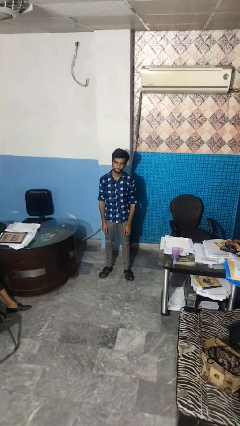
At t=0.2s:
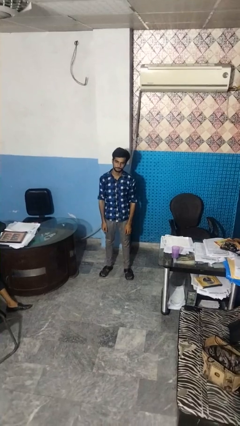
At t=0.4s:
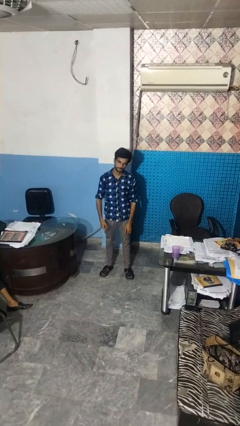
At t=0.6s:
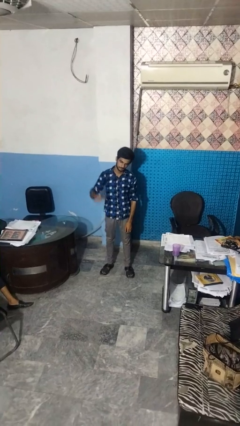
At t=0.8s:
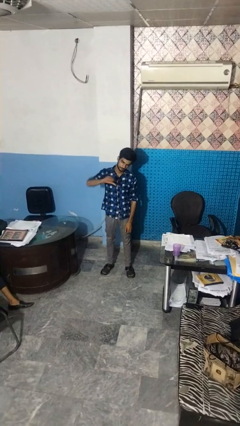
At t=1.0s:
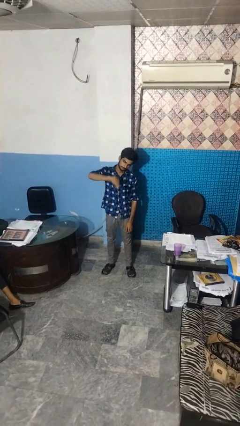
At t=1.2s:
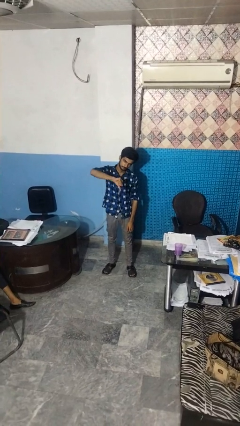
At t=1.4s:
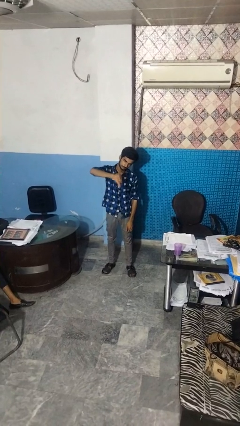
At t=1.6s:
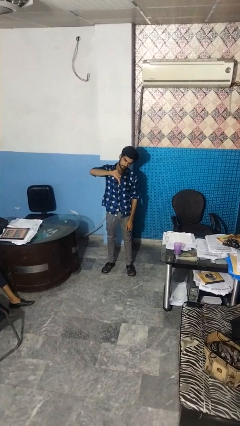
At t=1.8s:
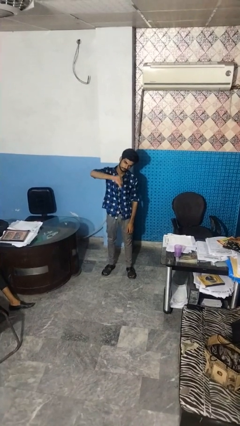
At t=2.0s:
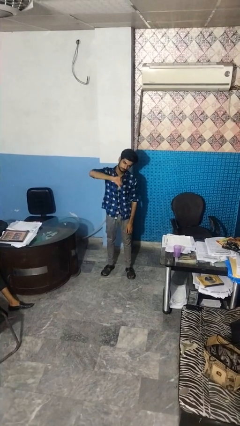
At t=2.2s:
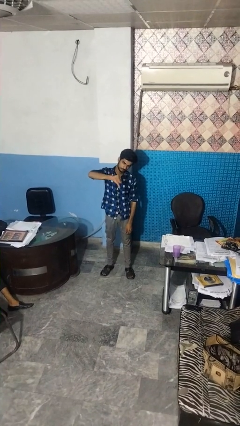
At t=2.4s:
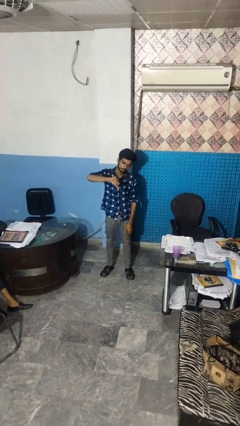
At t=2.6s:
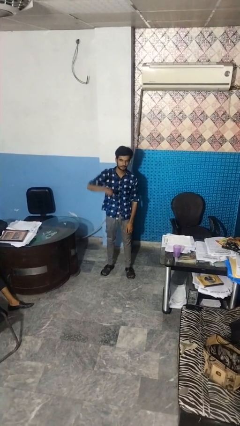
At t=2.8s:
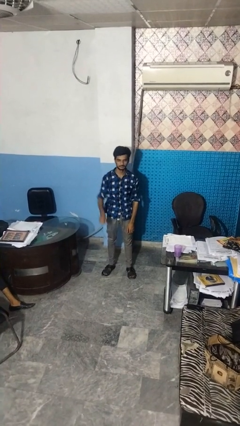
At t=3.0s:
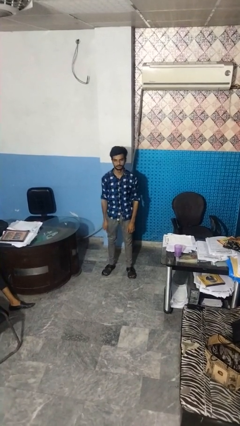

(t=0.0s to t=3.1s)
person gestures thumbs down

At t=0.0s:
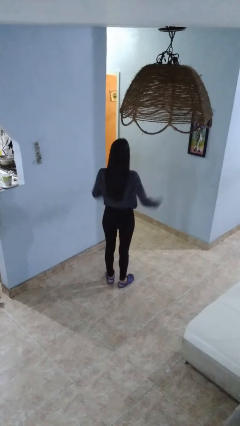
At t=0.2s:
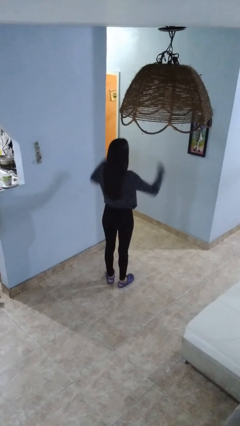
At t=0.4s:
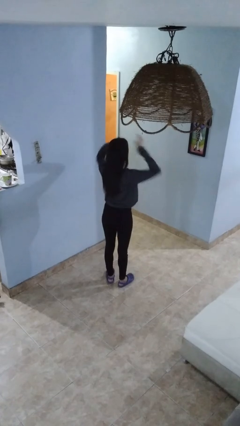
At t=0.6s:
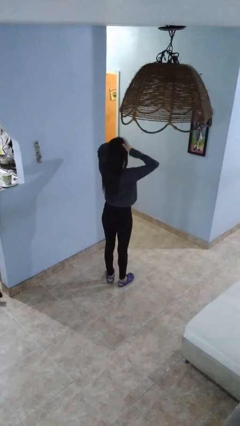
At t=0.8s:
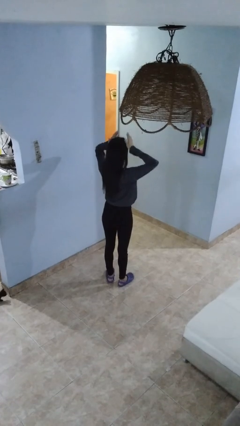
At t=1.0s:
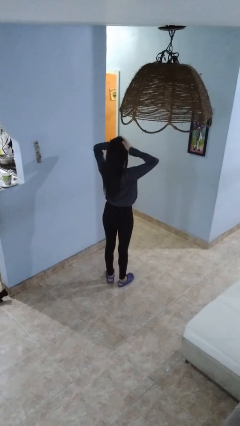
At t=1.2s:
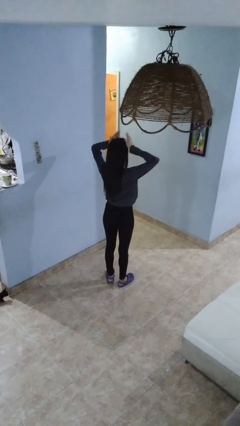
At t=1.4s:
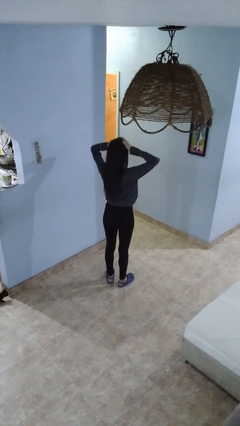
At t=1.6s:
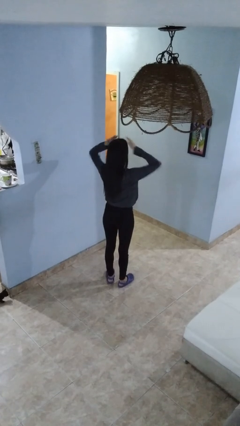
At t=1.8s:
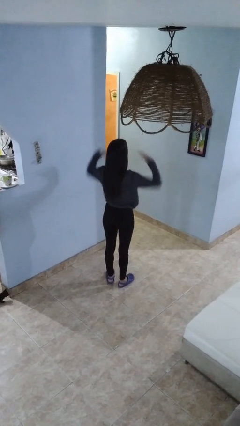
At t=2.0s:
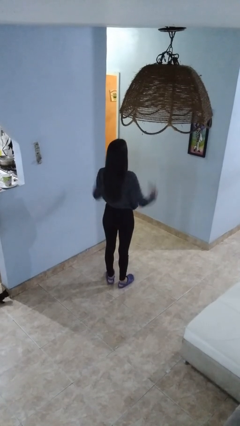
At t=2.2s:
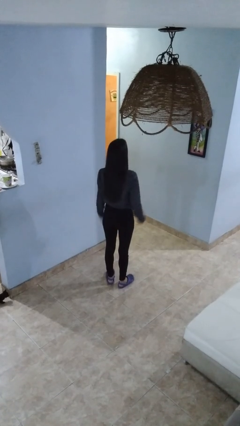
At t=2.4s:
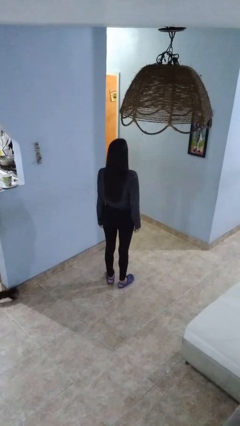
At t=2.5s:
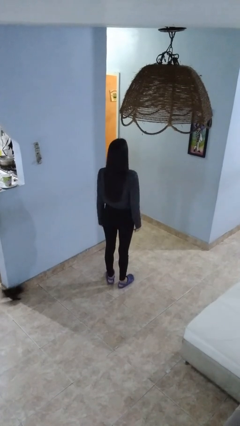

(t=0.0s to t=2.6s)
person pats head

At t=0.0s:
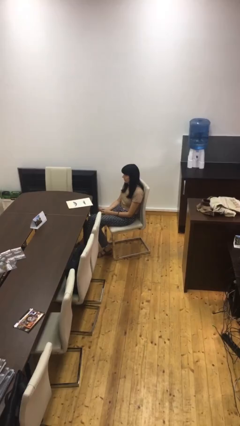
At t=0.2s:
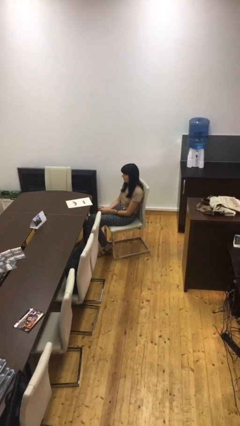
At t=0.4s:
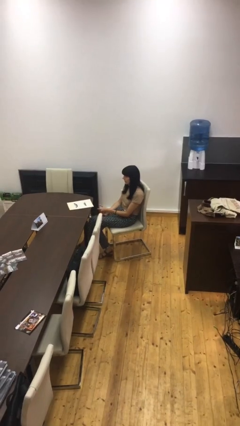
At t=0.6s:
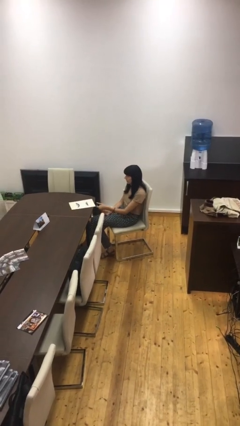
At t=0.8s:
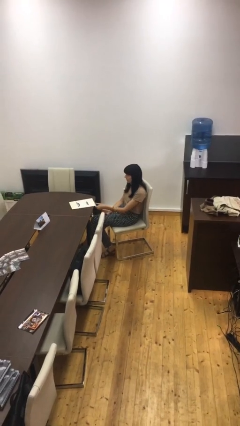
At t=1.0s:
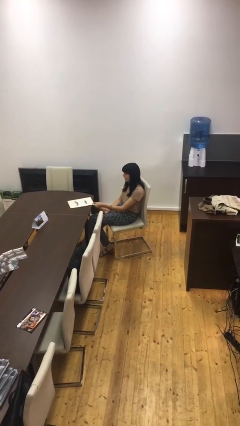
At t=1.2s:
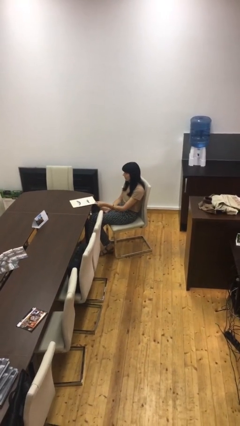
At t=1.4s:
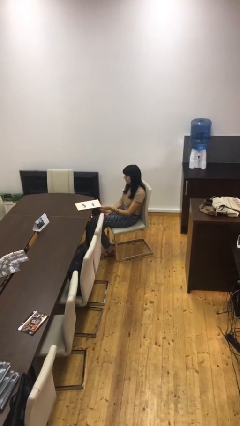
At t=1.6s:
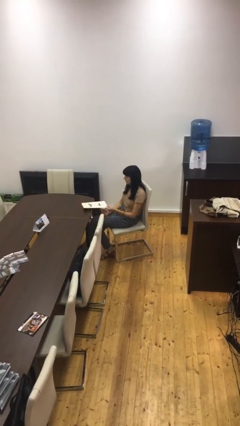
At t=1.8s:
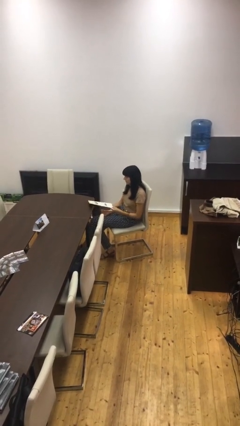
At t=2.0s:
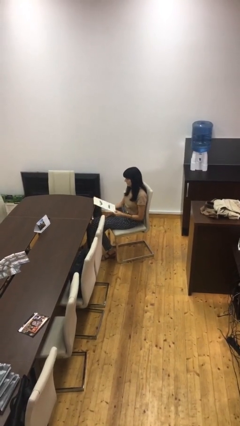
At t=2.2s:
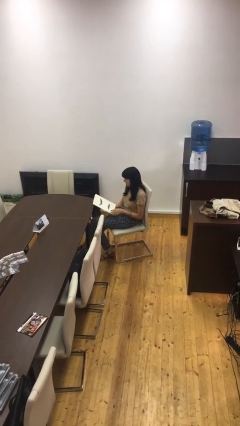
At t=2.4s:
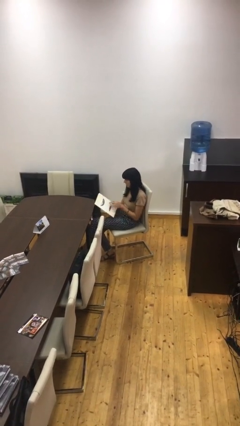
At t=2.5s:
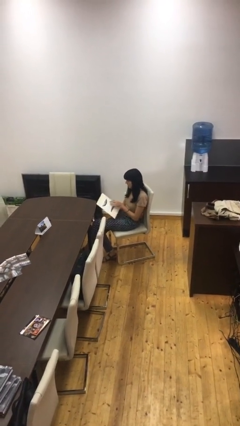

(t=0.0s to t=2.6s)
person picks up object from table

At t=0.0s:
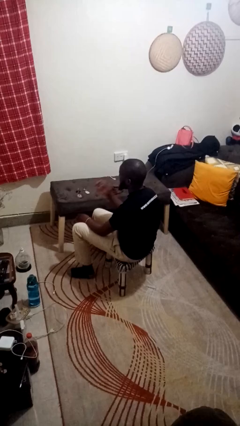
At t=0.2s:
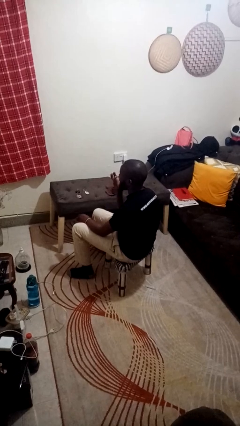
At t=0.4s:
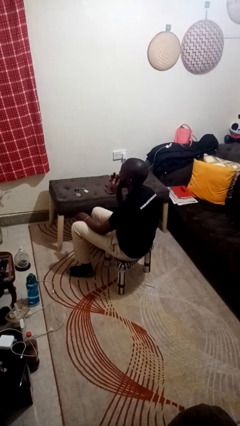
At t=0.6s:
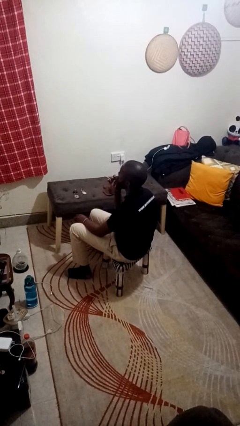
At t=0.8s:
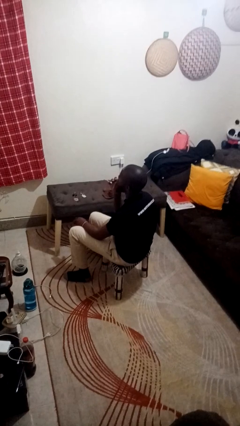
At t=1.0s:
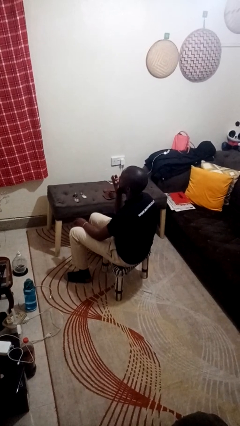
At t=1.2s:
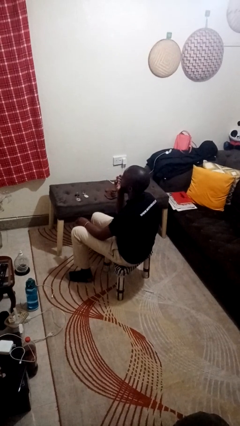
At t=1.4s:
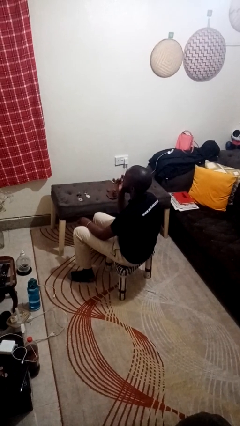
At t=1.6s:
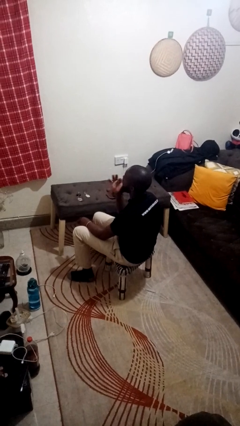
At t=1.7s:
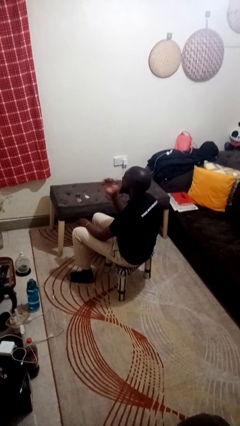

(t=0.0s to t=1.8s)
person licks fingers

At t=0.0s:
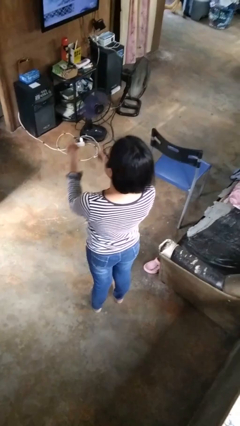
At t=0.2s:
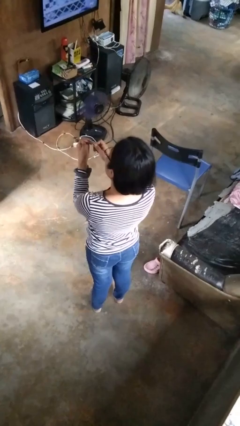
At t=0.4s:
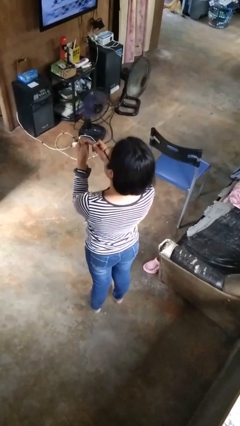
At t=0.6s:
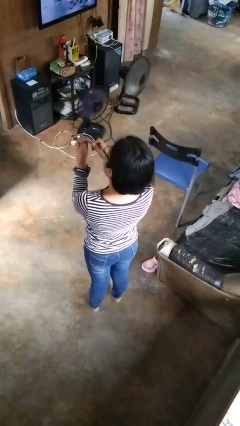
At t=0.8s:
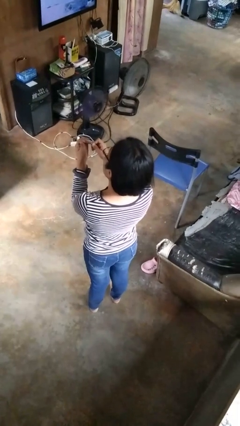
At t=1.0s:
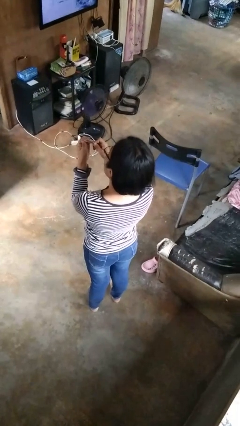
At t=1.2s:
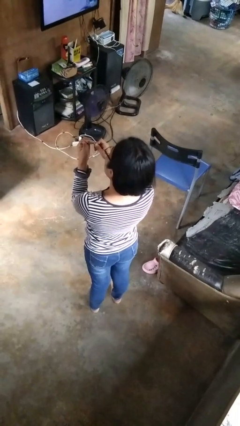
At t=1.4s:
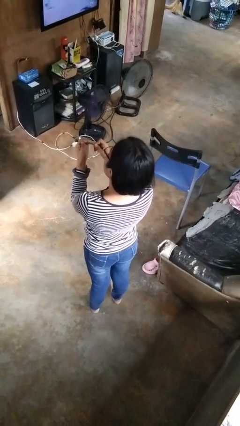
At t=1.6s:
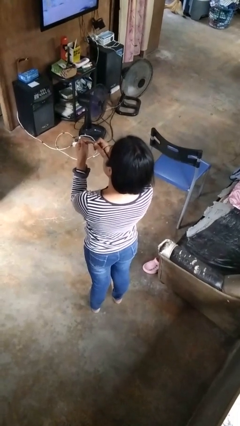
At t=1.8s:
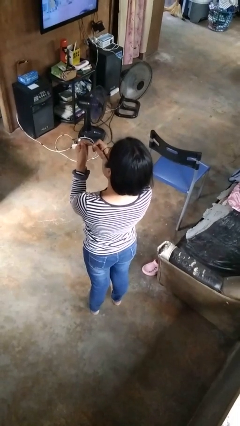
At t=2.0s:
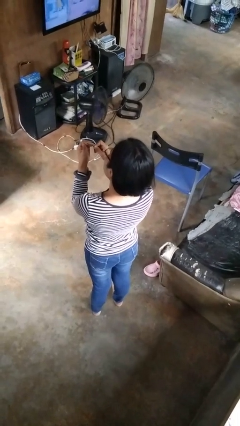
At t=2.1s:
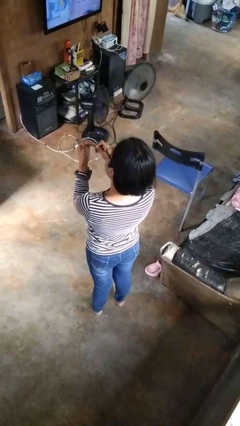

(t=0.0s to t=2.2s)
person files fingernails

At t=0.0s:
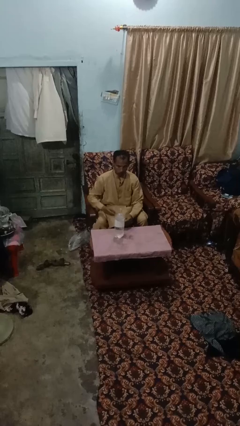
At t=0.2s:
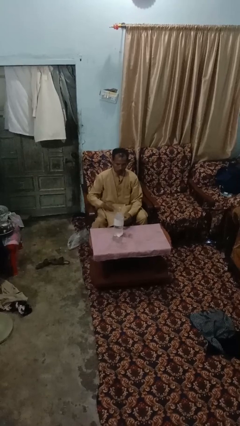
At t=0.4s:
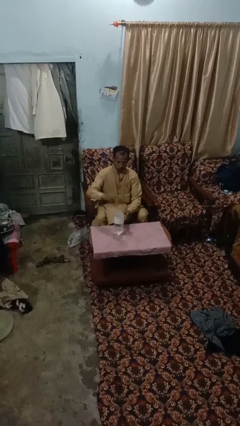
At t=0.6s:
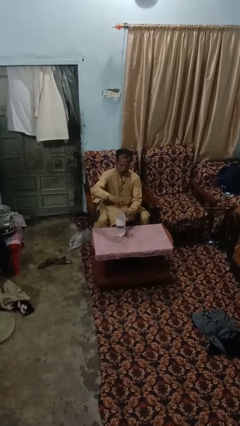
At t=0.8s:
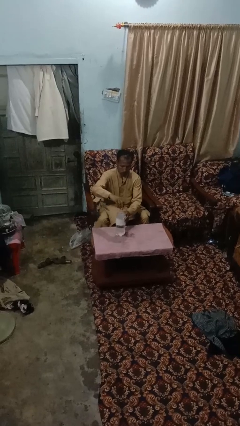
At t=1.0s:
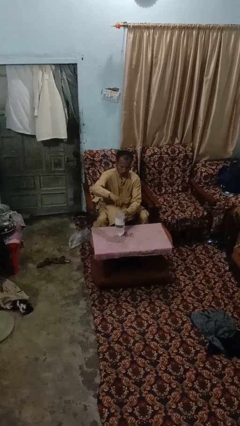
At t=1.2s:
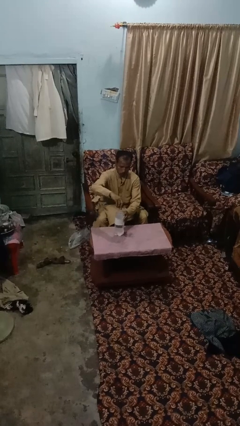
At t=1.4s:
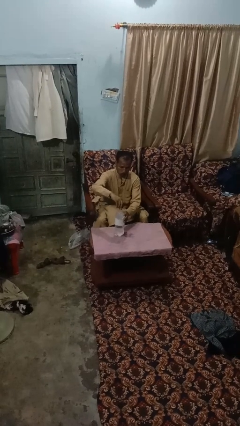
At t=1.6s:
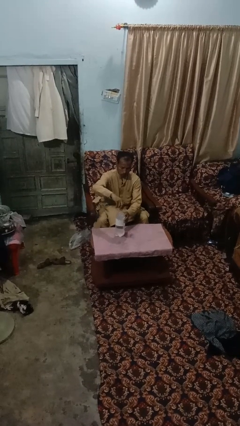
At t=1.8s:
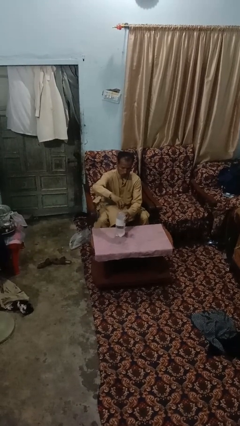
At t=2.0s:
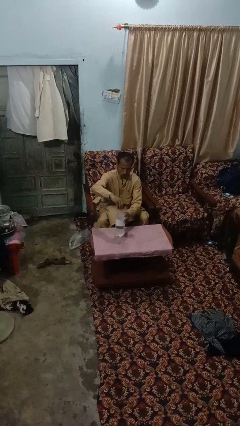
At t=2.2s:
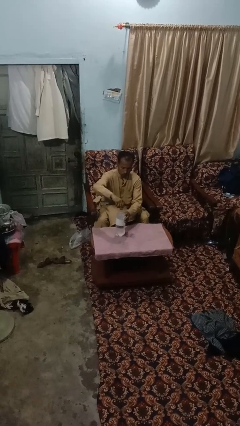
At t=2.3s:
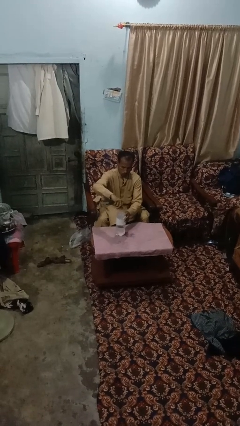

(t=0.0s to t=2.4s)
person screws lid to bottle

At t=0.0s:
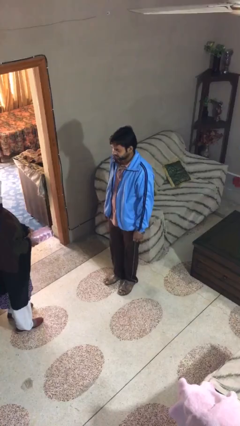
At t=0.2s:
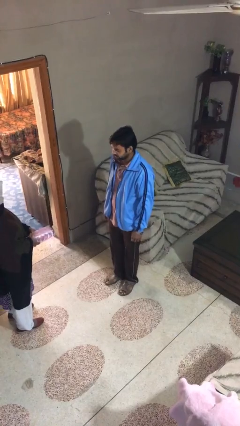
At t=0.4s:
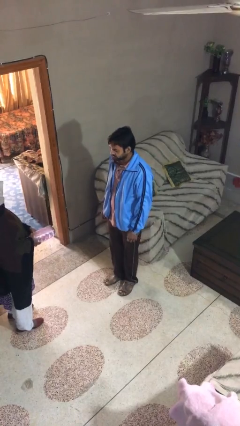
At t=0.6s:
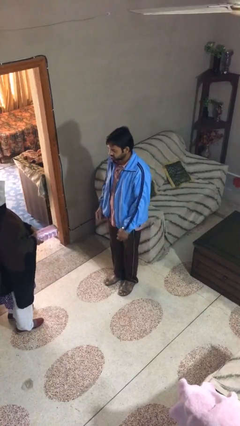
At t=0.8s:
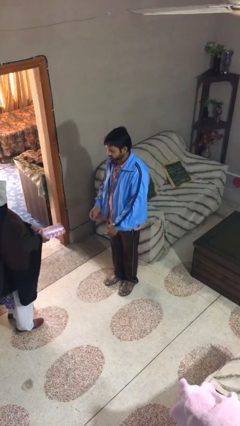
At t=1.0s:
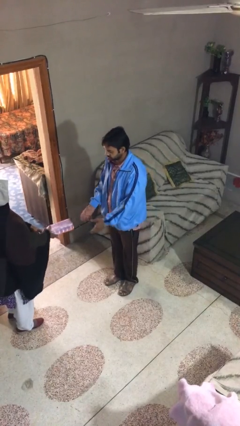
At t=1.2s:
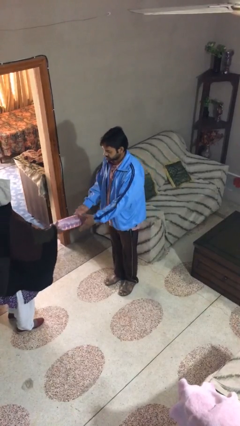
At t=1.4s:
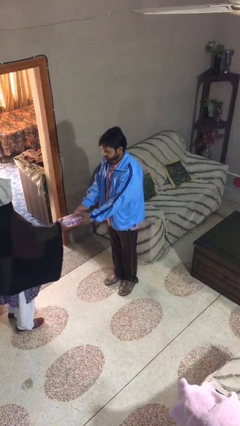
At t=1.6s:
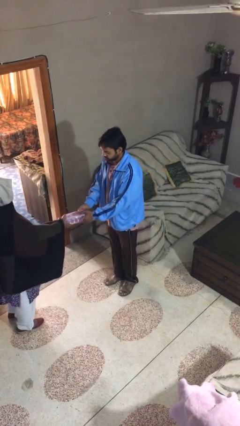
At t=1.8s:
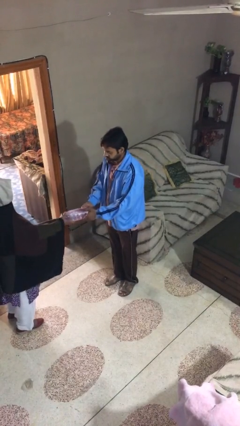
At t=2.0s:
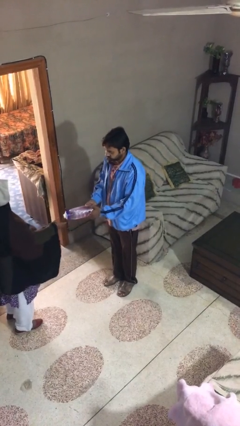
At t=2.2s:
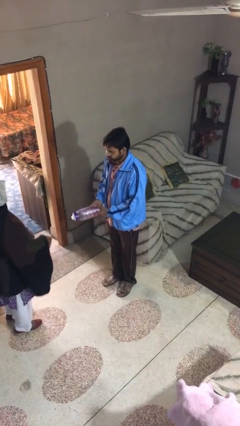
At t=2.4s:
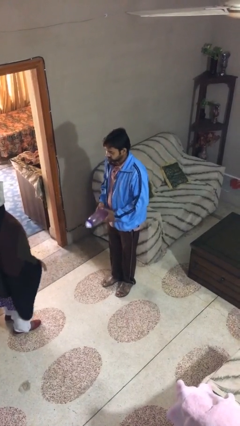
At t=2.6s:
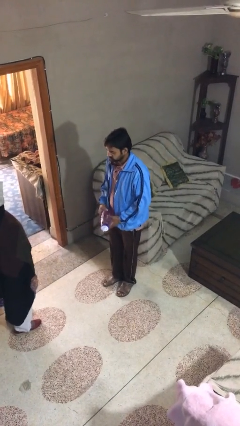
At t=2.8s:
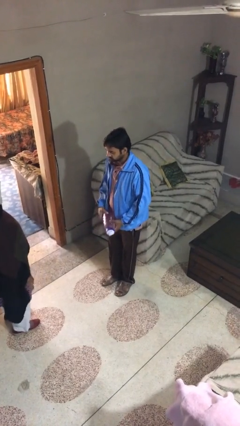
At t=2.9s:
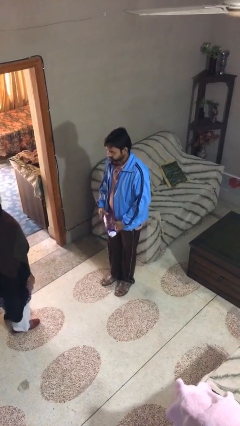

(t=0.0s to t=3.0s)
person transfers object to person
